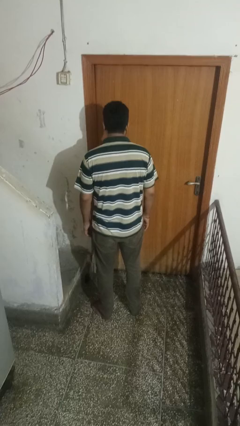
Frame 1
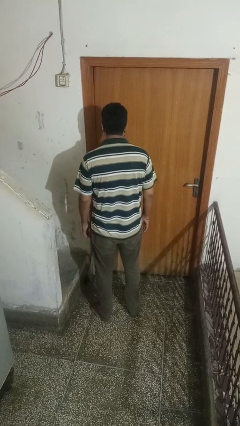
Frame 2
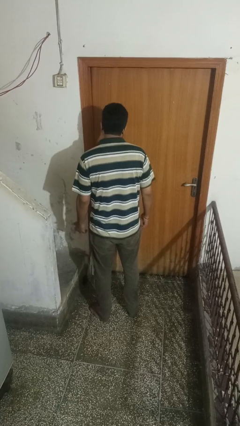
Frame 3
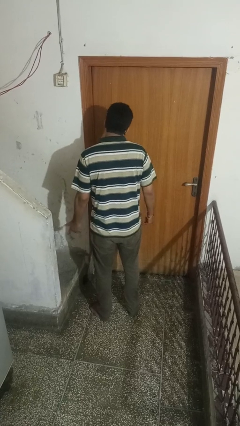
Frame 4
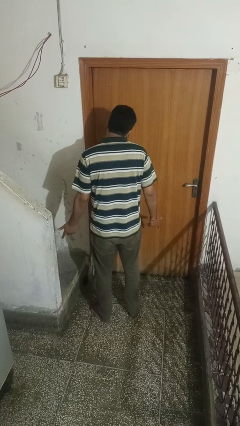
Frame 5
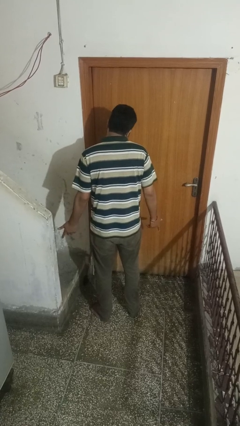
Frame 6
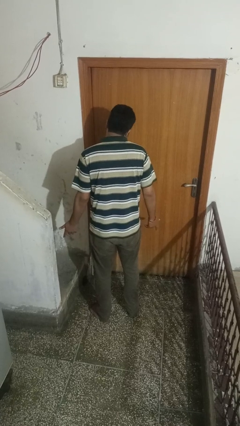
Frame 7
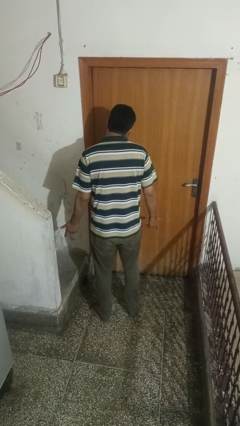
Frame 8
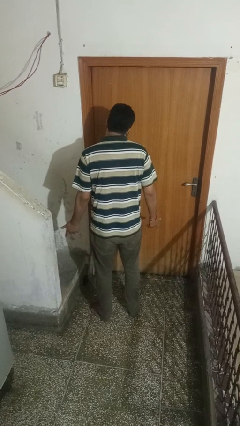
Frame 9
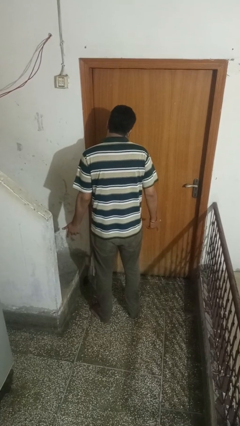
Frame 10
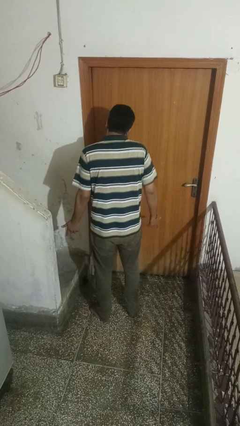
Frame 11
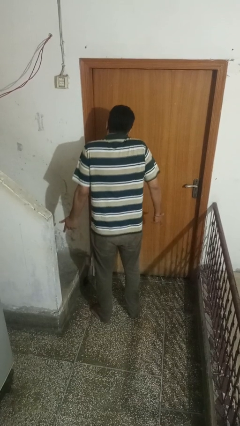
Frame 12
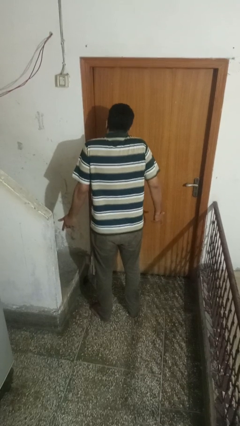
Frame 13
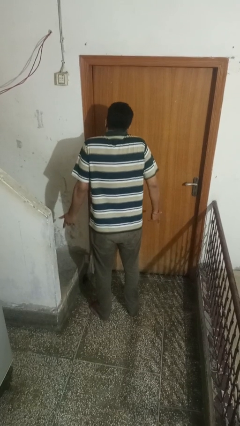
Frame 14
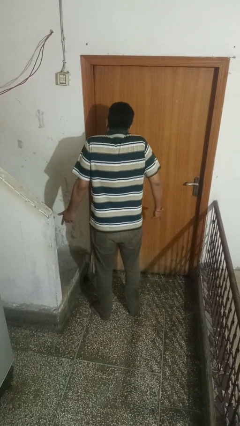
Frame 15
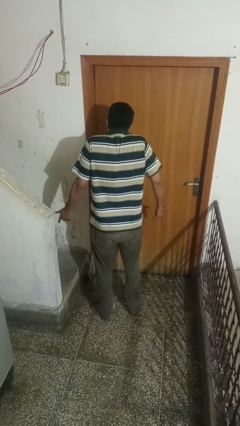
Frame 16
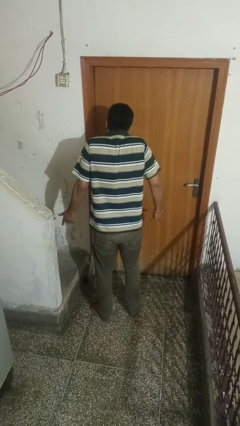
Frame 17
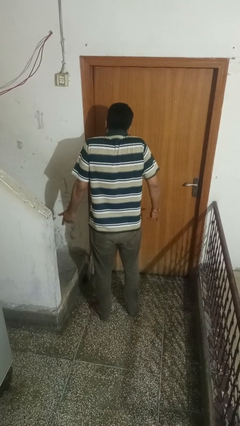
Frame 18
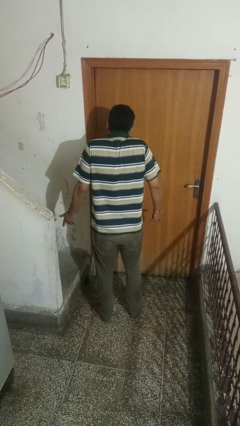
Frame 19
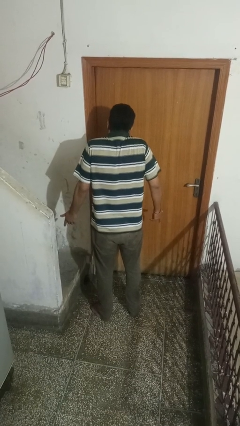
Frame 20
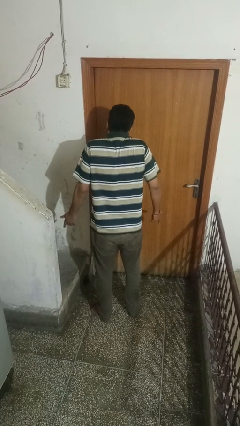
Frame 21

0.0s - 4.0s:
person shrugs

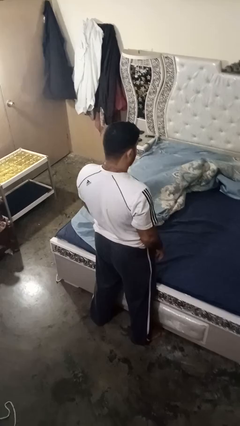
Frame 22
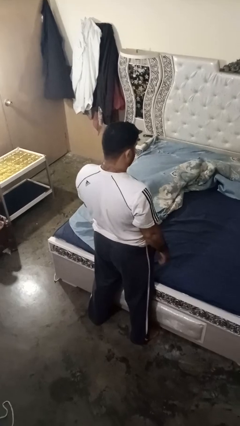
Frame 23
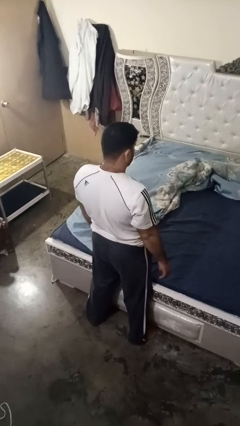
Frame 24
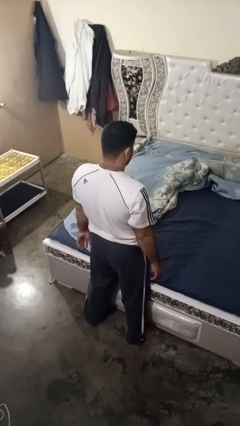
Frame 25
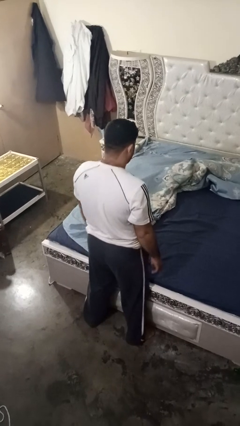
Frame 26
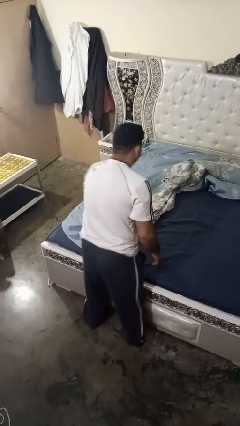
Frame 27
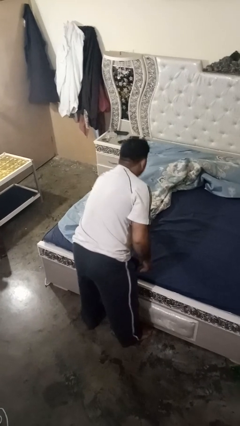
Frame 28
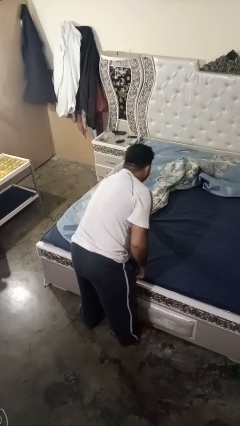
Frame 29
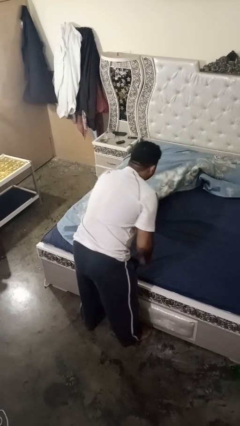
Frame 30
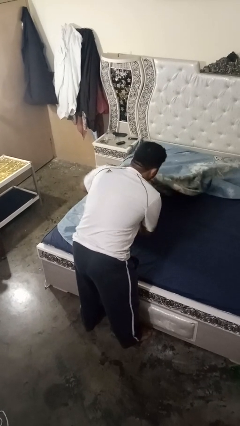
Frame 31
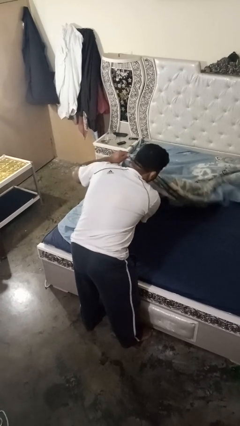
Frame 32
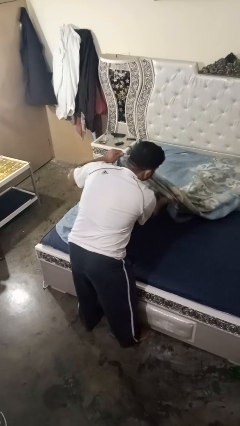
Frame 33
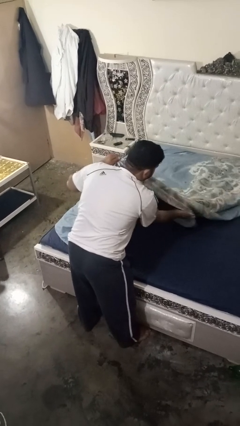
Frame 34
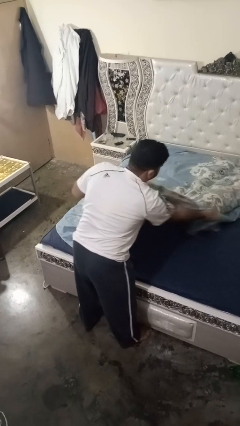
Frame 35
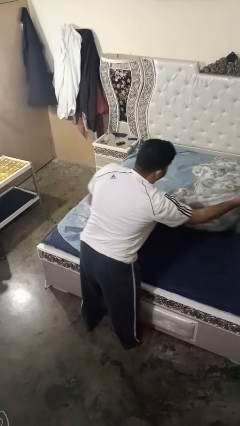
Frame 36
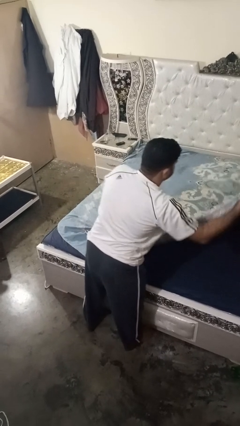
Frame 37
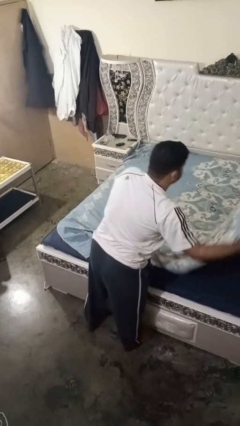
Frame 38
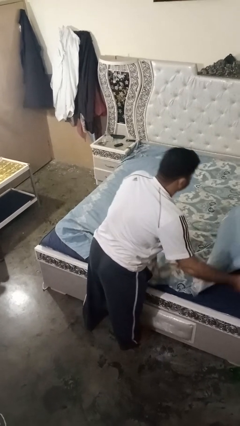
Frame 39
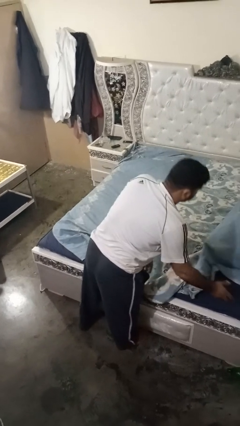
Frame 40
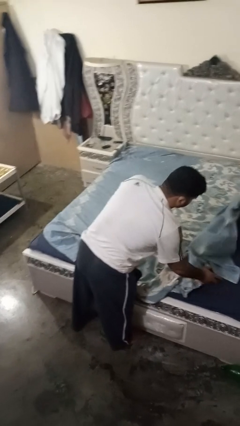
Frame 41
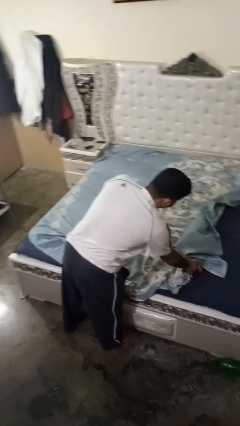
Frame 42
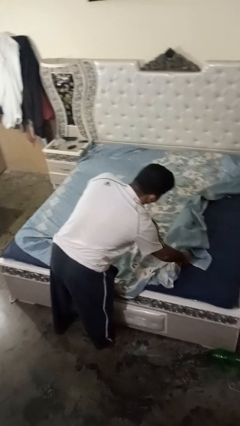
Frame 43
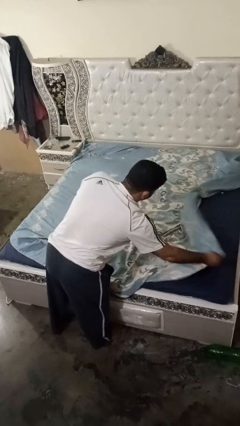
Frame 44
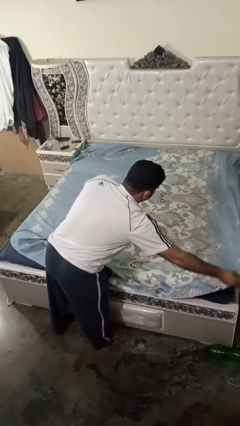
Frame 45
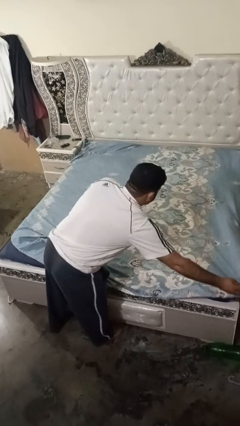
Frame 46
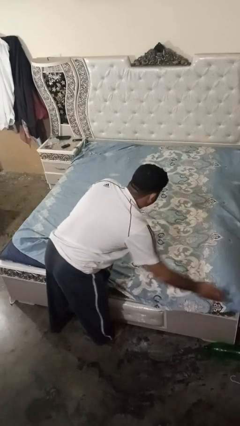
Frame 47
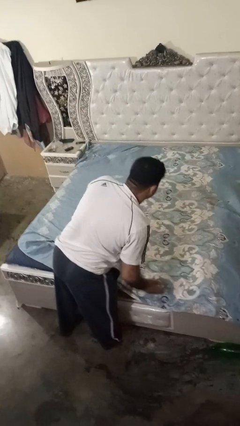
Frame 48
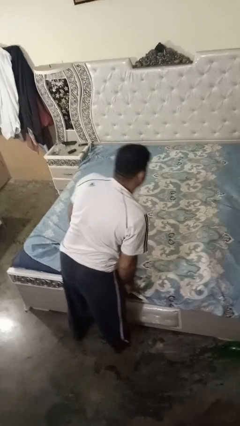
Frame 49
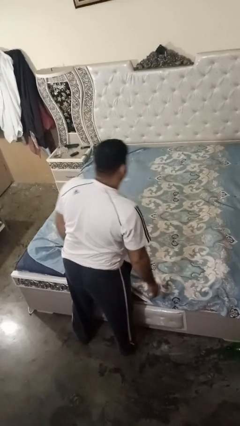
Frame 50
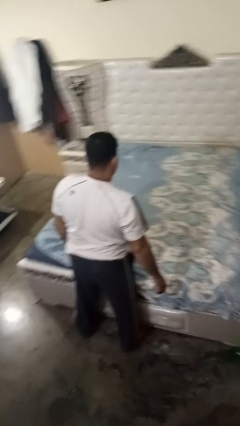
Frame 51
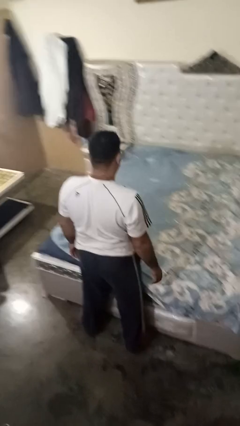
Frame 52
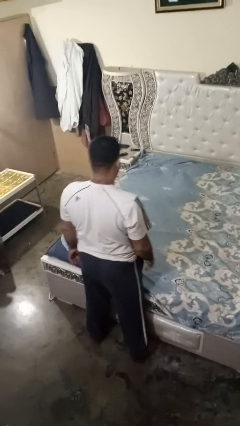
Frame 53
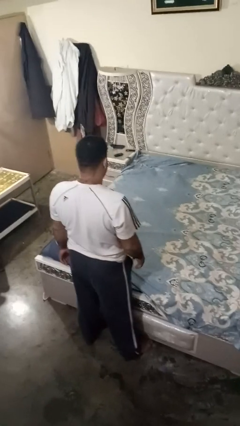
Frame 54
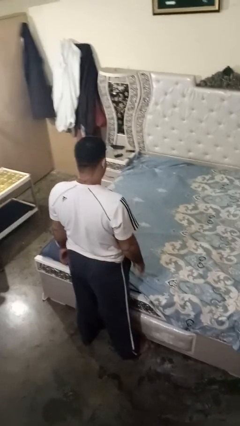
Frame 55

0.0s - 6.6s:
person makes bed

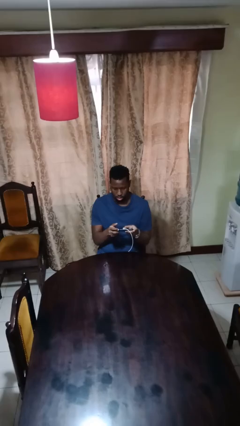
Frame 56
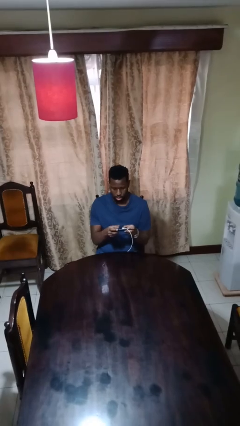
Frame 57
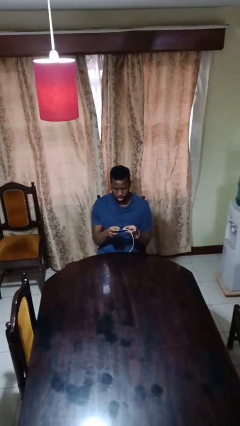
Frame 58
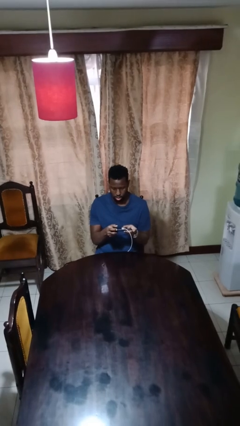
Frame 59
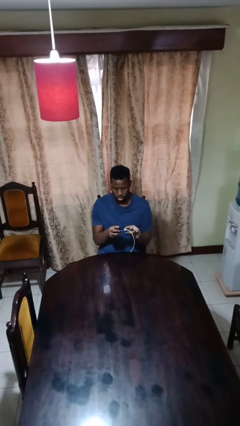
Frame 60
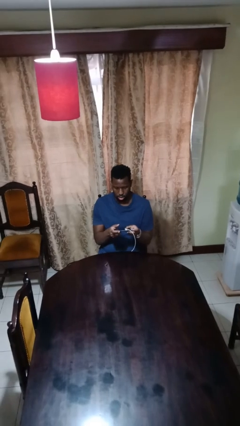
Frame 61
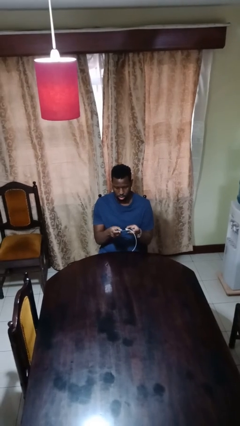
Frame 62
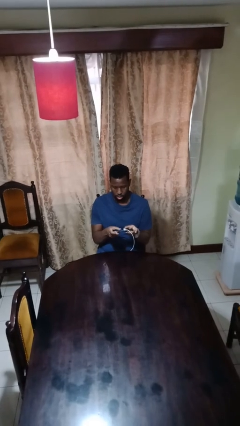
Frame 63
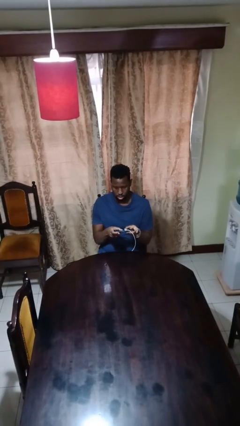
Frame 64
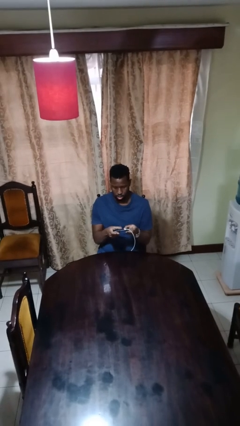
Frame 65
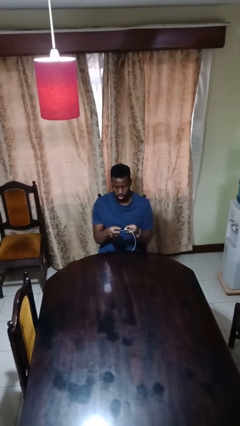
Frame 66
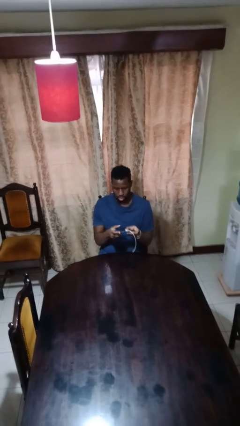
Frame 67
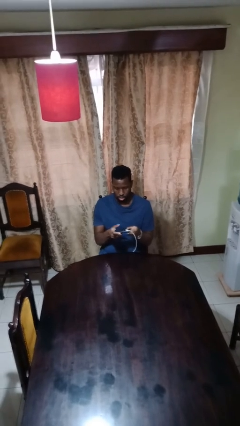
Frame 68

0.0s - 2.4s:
person interacts with handheld game

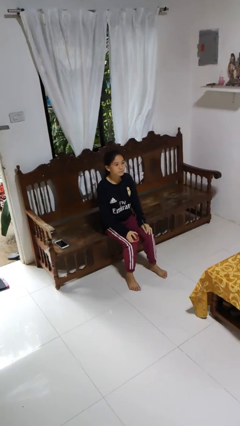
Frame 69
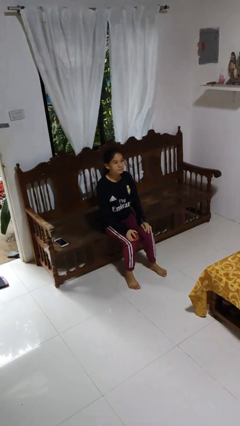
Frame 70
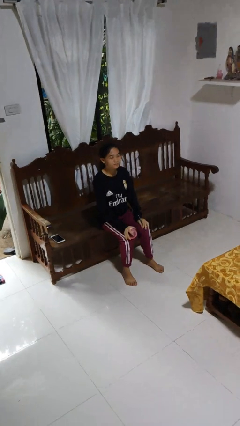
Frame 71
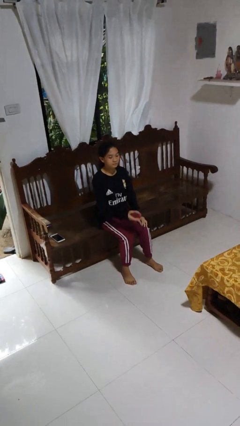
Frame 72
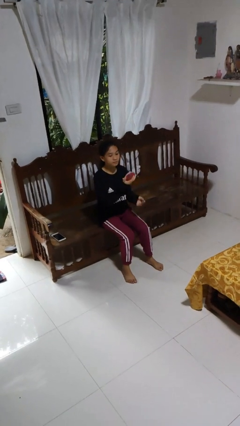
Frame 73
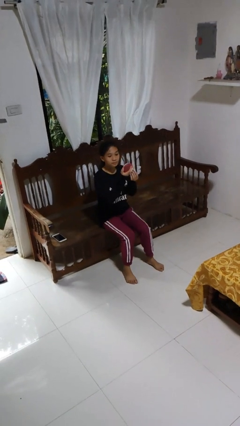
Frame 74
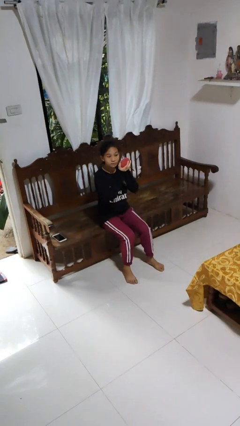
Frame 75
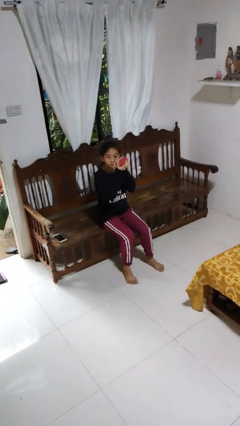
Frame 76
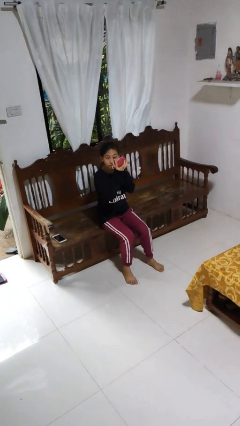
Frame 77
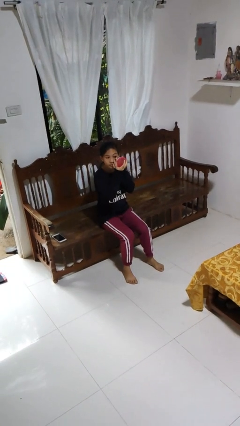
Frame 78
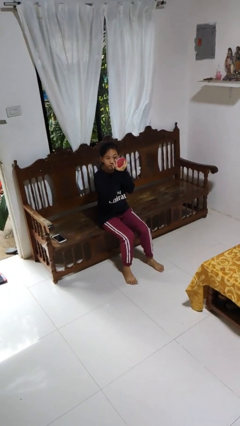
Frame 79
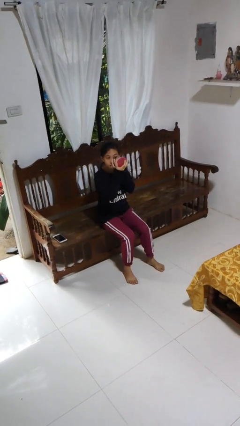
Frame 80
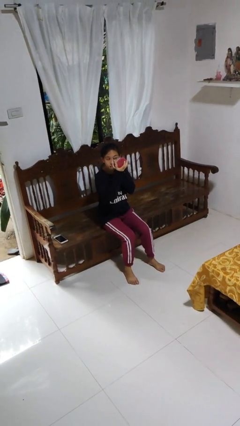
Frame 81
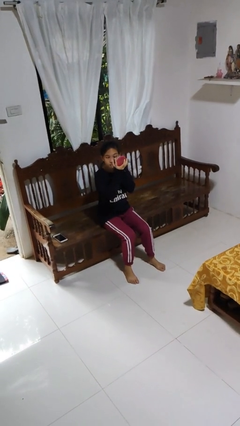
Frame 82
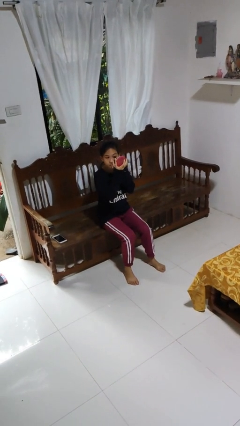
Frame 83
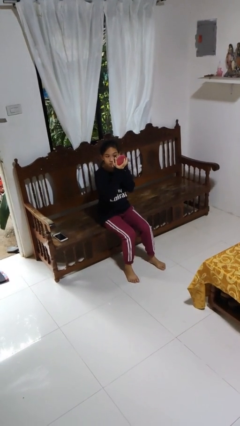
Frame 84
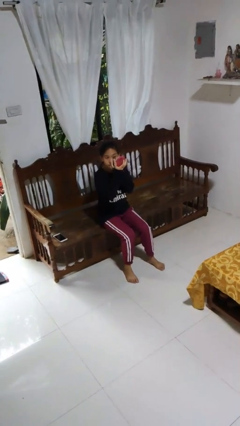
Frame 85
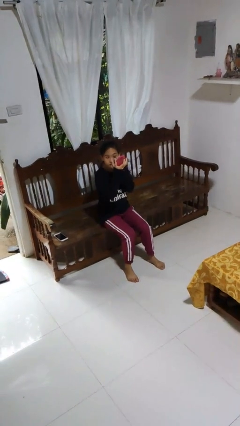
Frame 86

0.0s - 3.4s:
person applies eye makeup

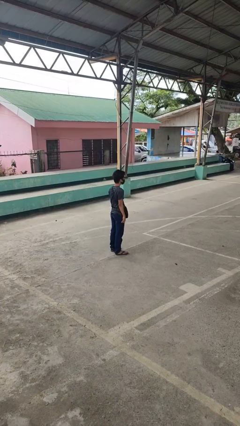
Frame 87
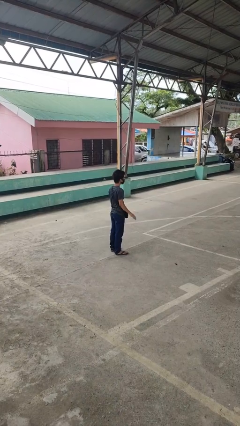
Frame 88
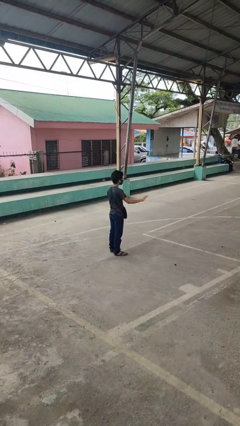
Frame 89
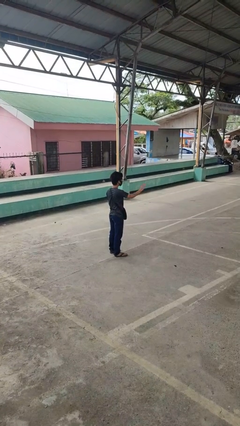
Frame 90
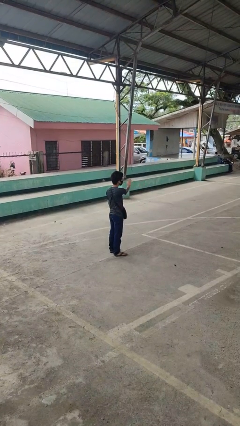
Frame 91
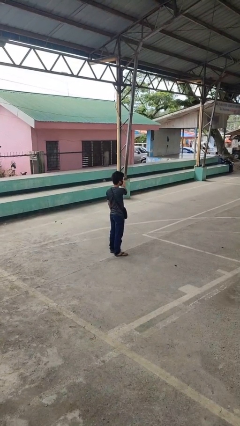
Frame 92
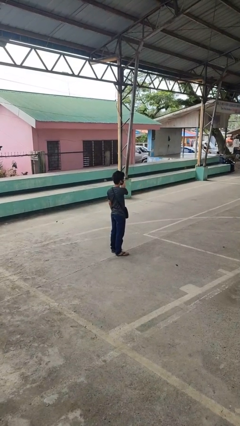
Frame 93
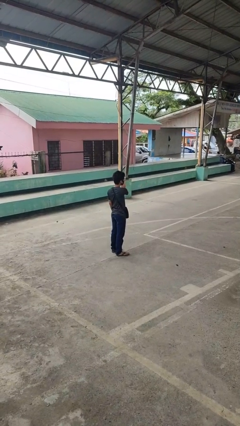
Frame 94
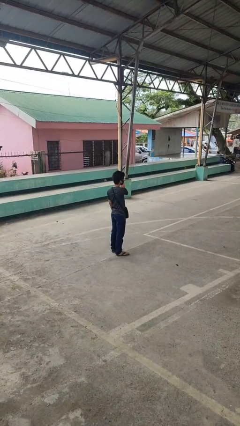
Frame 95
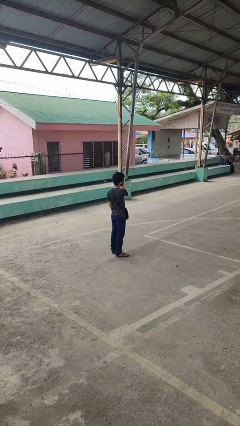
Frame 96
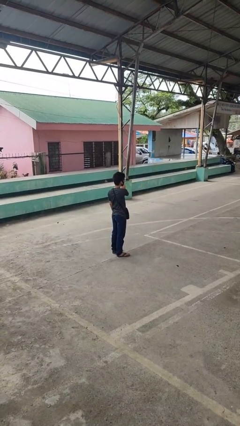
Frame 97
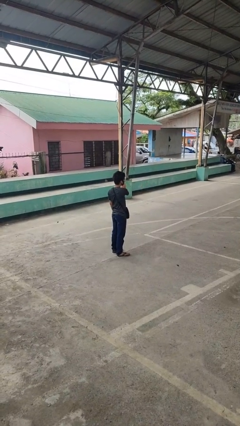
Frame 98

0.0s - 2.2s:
person gestures swipe left
